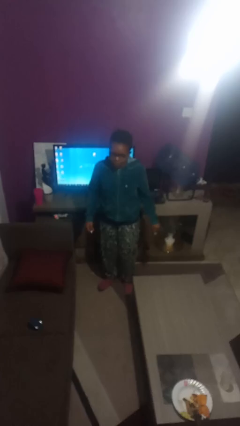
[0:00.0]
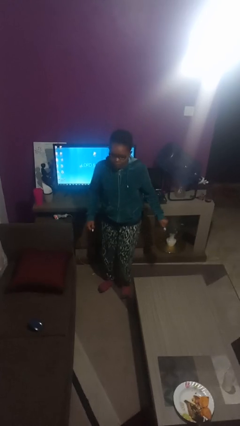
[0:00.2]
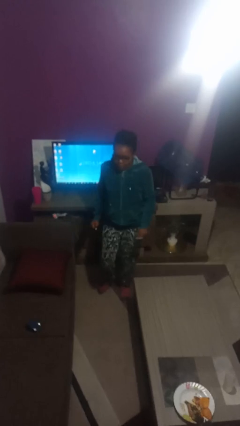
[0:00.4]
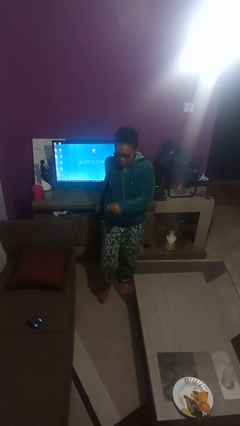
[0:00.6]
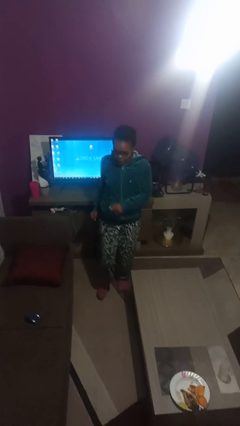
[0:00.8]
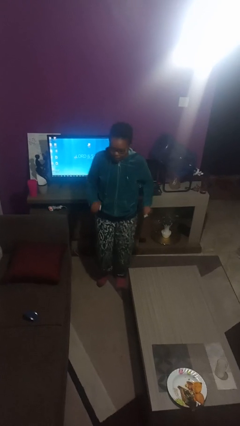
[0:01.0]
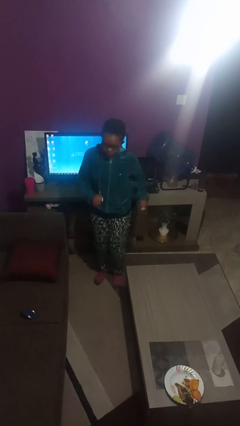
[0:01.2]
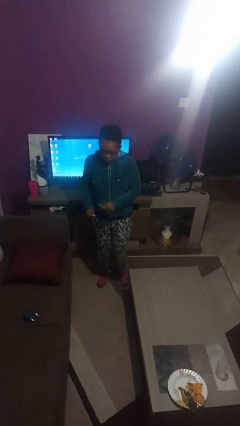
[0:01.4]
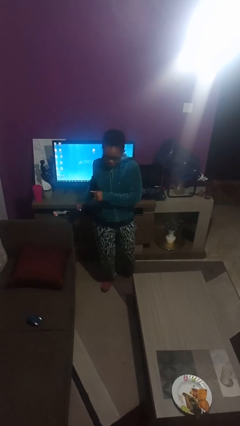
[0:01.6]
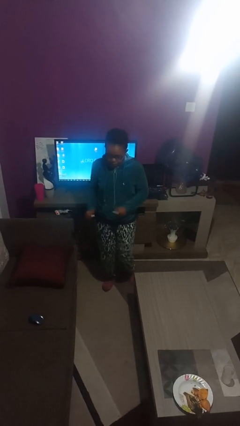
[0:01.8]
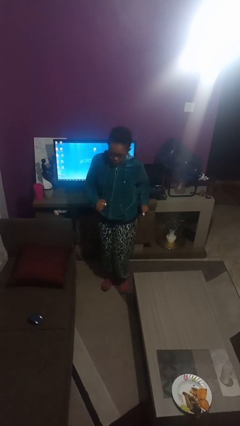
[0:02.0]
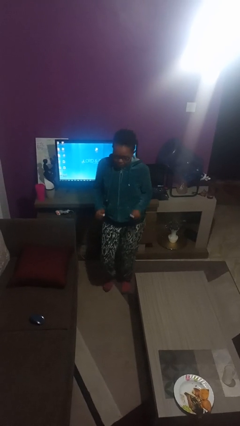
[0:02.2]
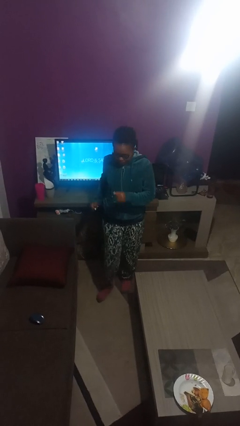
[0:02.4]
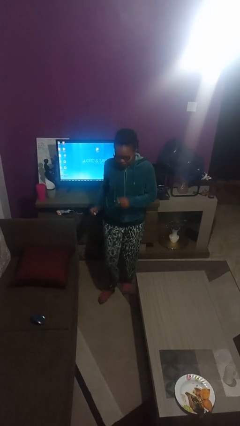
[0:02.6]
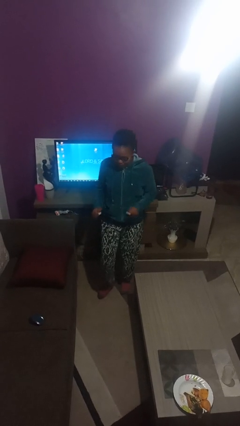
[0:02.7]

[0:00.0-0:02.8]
person dances in place

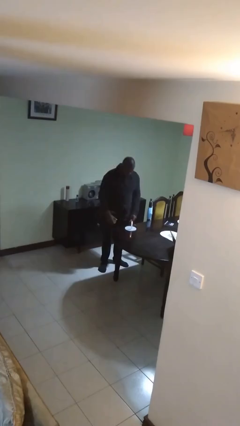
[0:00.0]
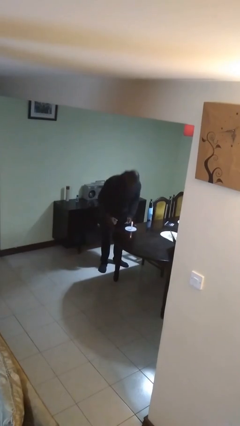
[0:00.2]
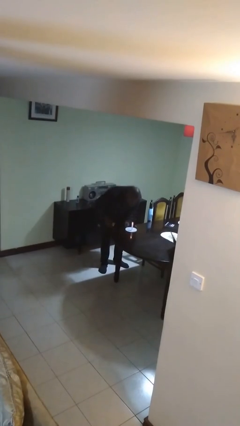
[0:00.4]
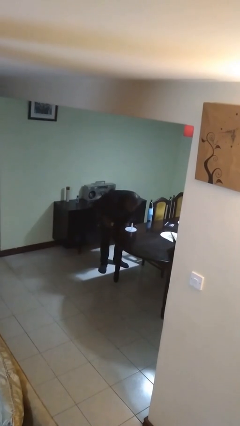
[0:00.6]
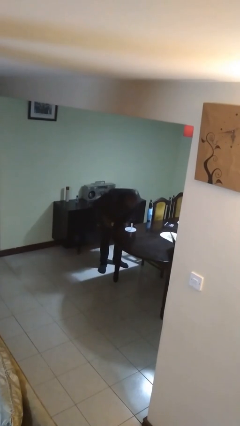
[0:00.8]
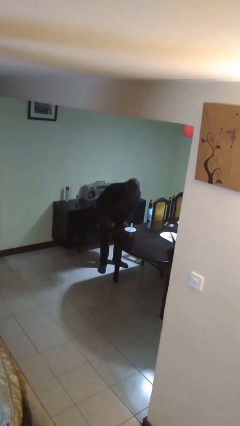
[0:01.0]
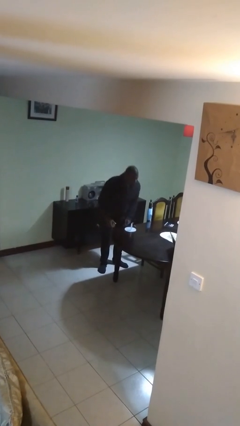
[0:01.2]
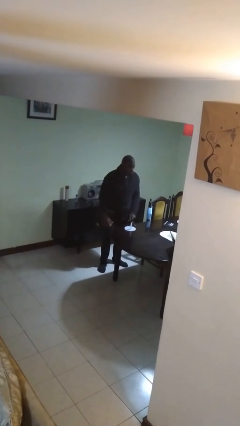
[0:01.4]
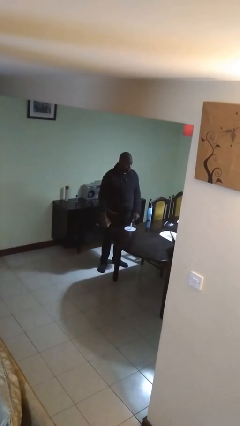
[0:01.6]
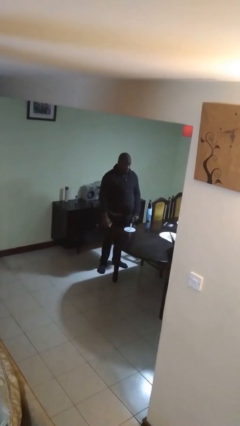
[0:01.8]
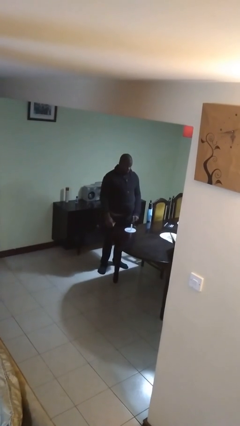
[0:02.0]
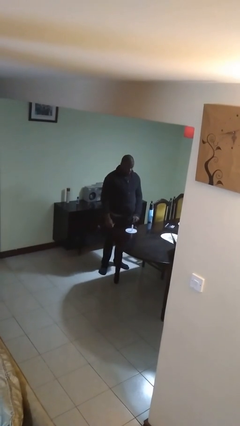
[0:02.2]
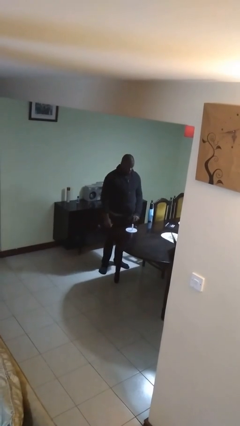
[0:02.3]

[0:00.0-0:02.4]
person extinguishes candle

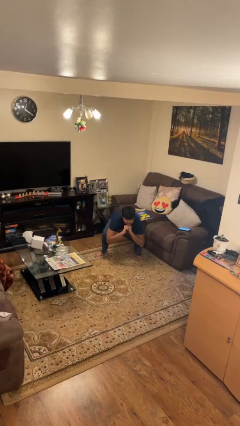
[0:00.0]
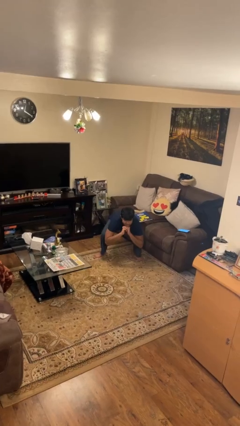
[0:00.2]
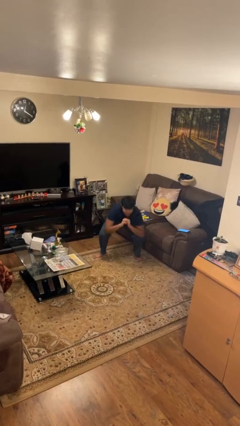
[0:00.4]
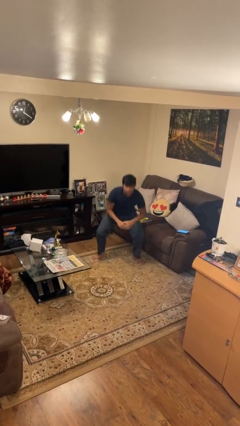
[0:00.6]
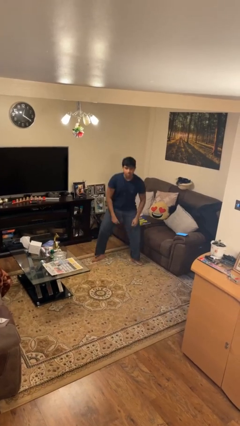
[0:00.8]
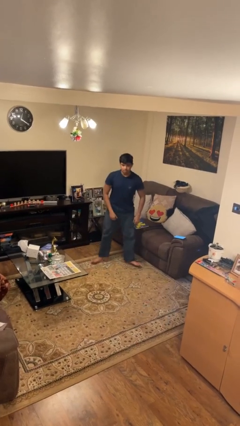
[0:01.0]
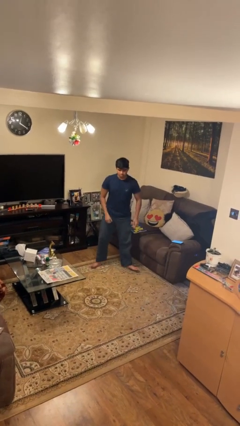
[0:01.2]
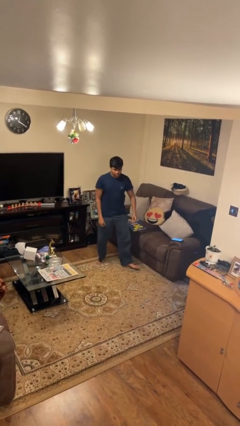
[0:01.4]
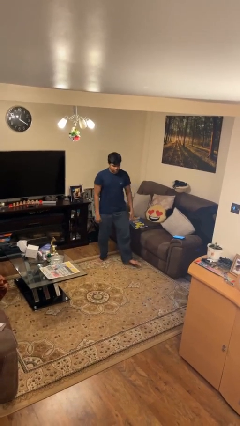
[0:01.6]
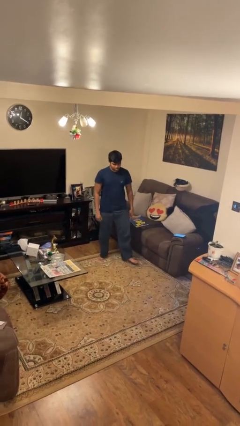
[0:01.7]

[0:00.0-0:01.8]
person stands up

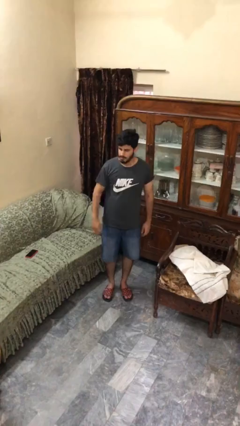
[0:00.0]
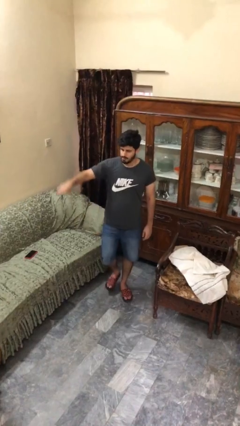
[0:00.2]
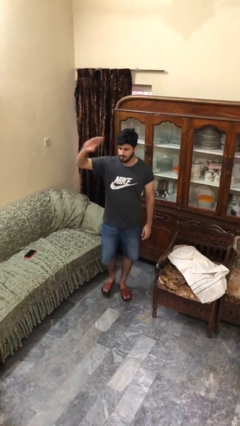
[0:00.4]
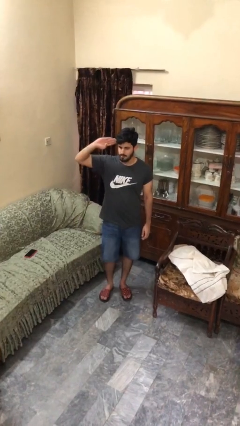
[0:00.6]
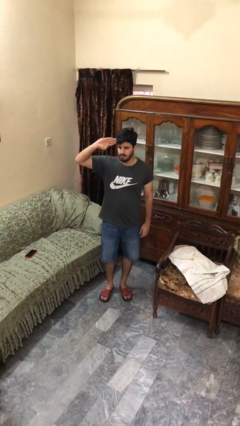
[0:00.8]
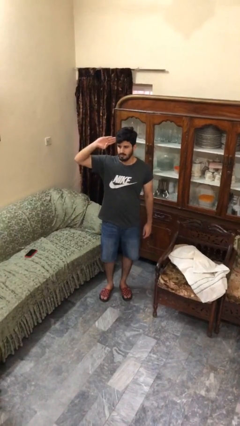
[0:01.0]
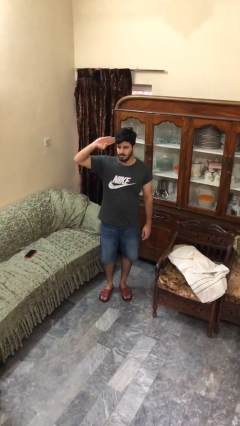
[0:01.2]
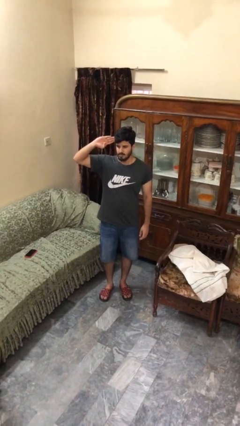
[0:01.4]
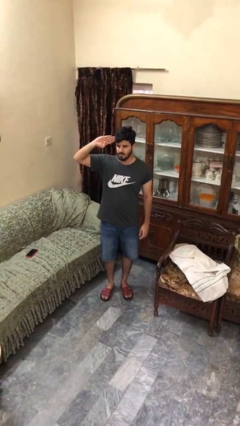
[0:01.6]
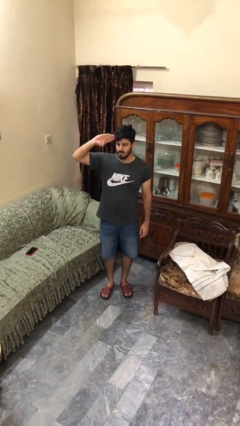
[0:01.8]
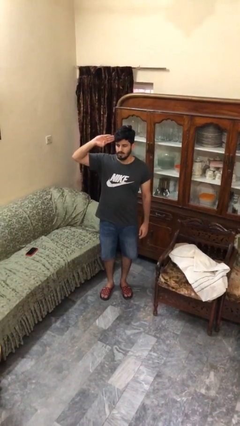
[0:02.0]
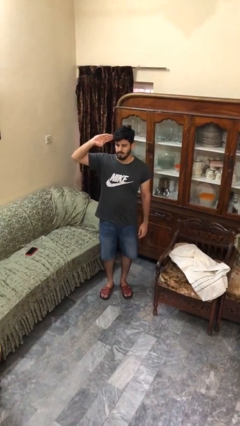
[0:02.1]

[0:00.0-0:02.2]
person salutes

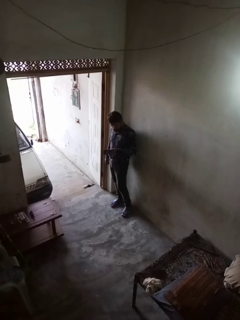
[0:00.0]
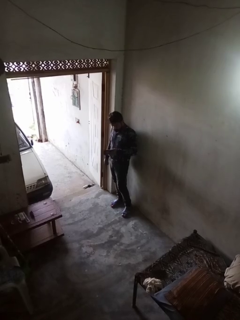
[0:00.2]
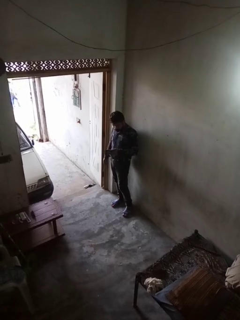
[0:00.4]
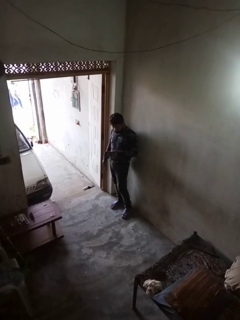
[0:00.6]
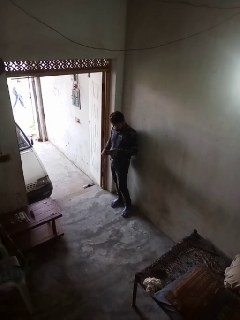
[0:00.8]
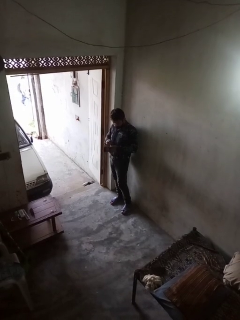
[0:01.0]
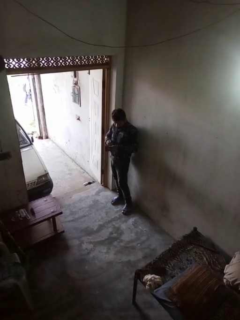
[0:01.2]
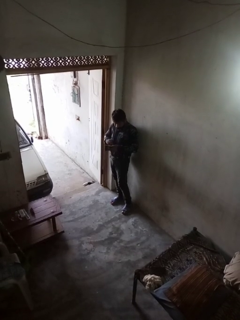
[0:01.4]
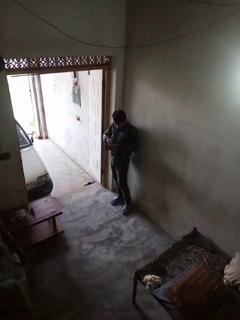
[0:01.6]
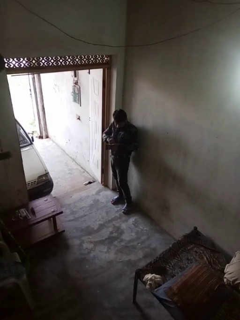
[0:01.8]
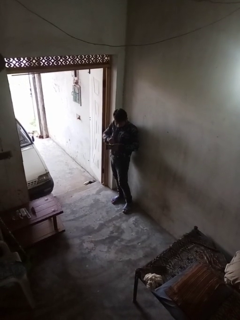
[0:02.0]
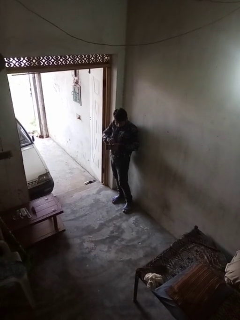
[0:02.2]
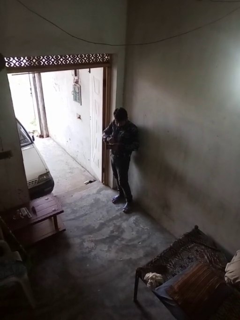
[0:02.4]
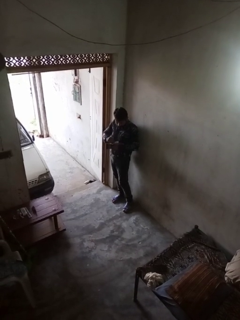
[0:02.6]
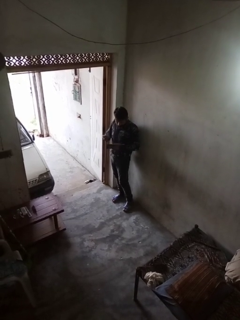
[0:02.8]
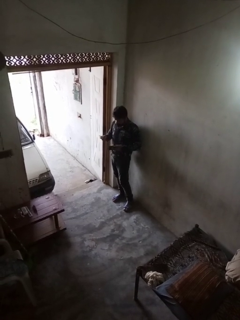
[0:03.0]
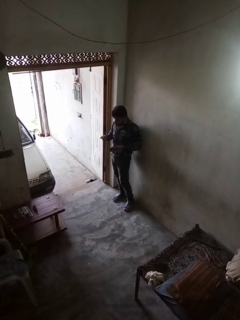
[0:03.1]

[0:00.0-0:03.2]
person takes object from purse

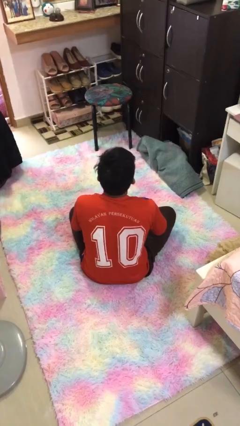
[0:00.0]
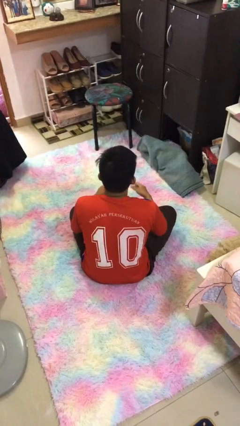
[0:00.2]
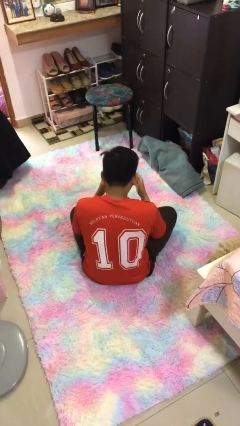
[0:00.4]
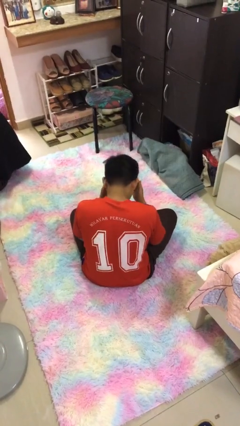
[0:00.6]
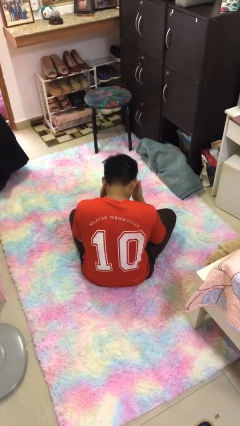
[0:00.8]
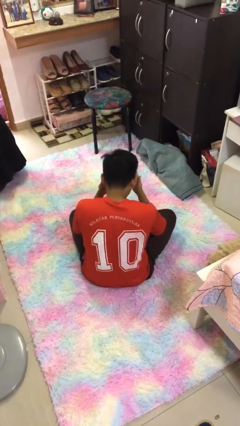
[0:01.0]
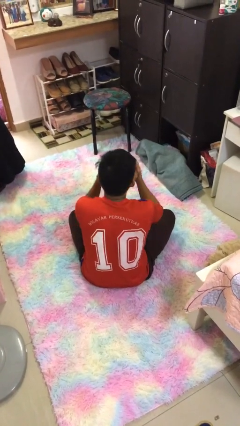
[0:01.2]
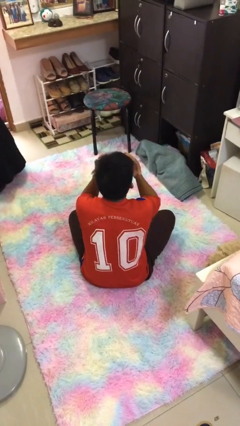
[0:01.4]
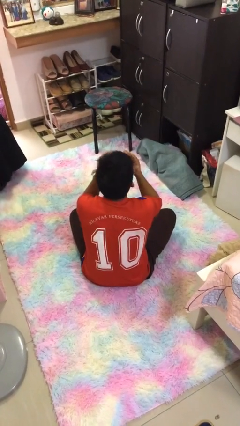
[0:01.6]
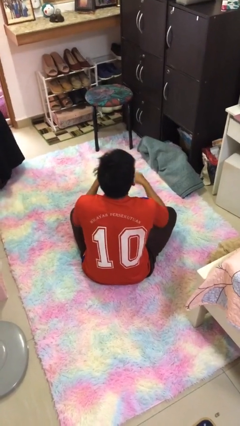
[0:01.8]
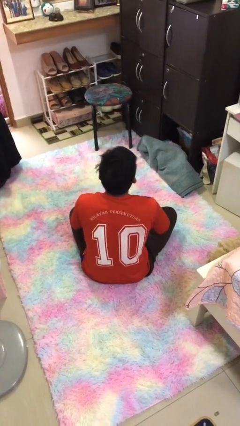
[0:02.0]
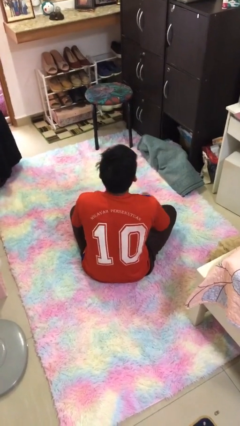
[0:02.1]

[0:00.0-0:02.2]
person covers face with hands

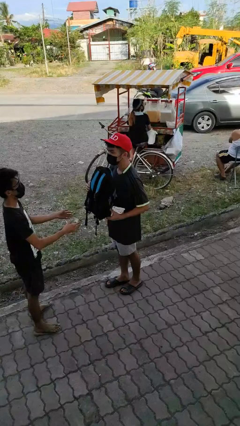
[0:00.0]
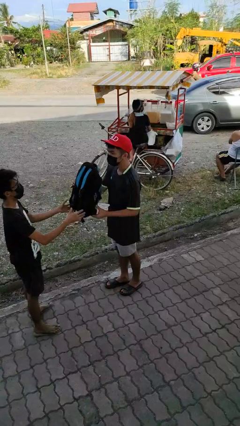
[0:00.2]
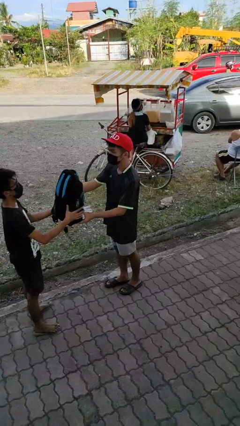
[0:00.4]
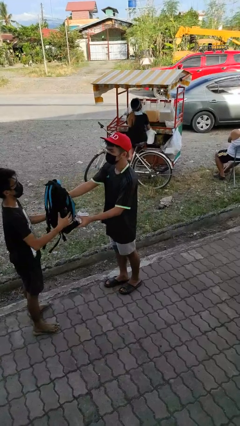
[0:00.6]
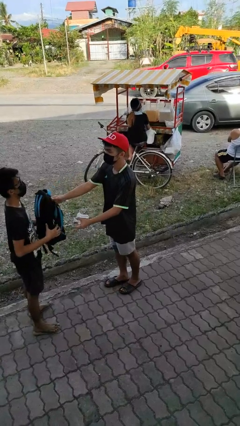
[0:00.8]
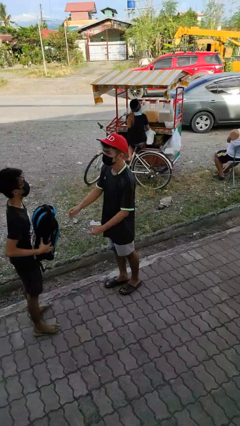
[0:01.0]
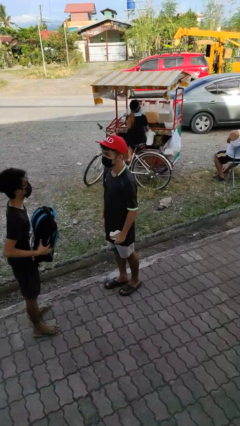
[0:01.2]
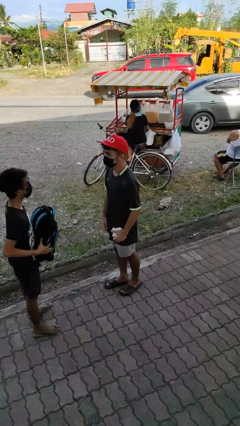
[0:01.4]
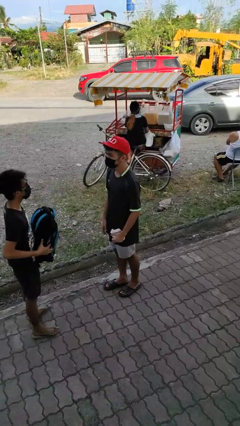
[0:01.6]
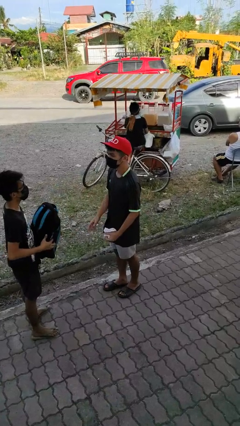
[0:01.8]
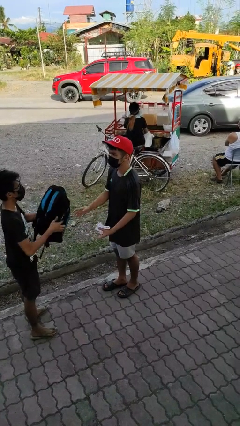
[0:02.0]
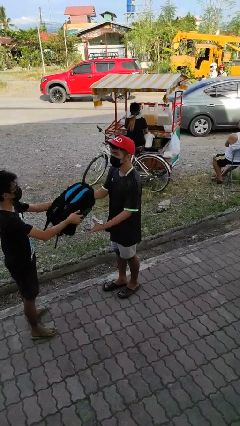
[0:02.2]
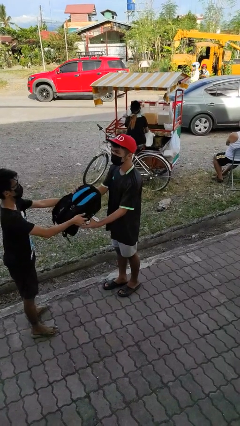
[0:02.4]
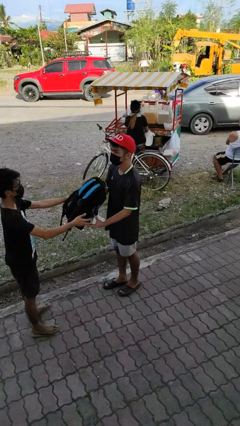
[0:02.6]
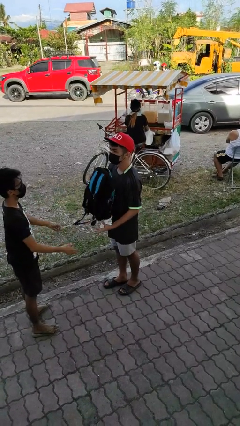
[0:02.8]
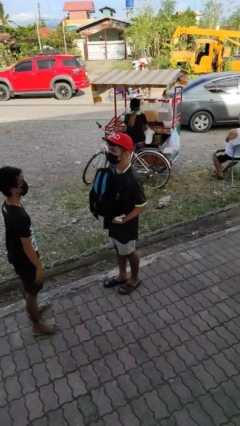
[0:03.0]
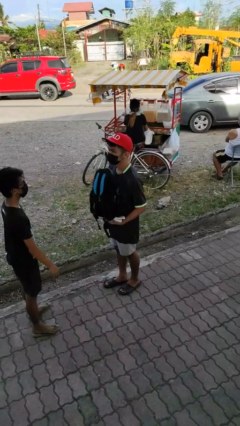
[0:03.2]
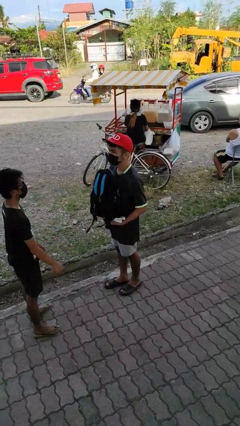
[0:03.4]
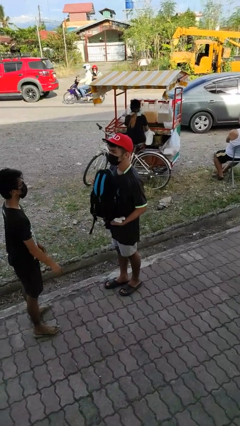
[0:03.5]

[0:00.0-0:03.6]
person transfers object to person
